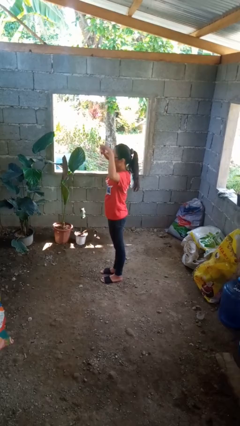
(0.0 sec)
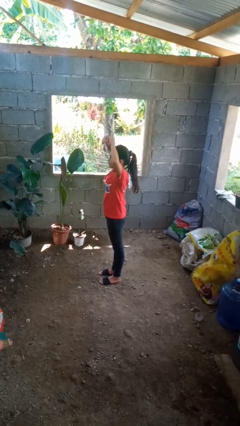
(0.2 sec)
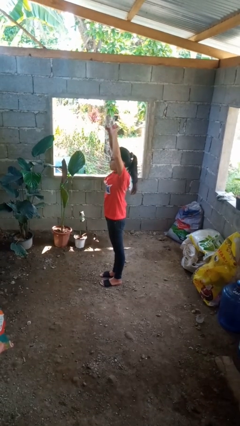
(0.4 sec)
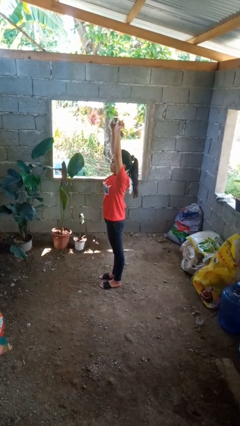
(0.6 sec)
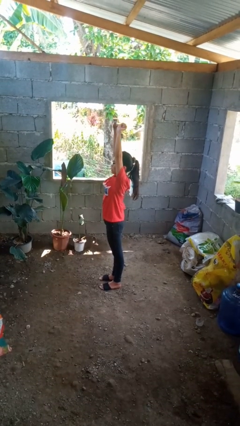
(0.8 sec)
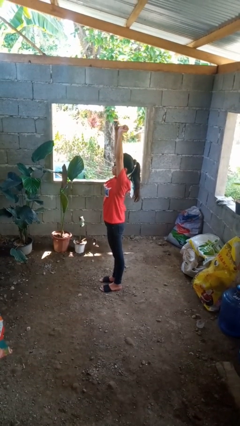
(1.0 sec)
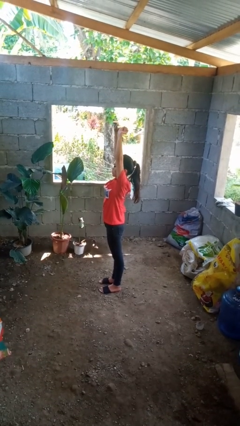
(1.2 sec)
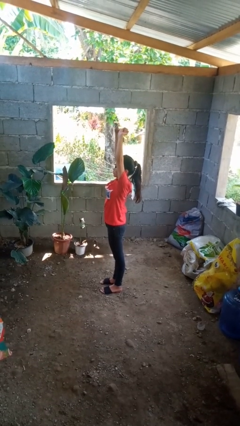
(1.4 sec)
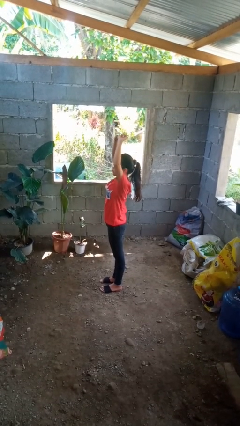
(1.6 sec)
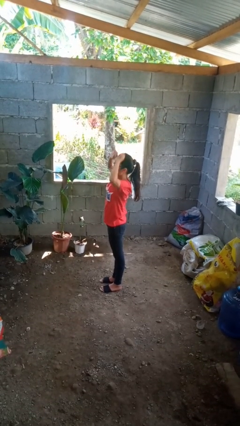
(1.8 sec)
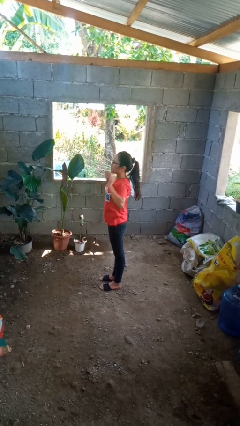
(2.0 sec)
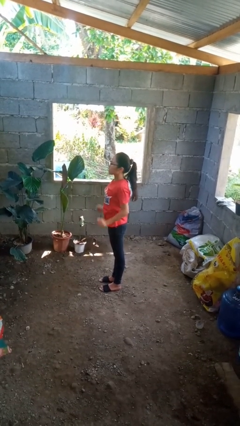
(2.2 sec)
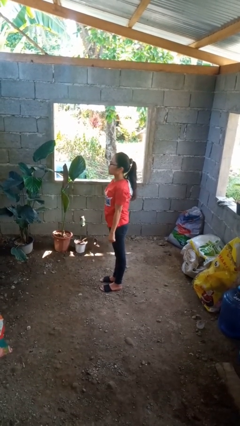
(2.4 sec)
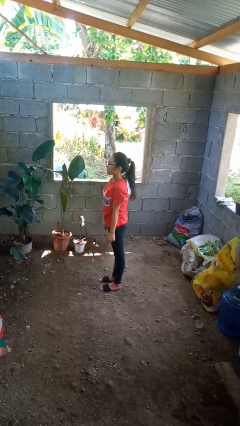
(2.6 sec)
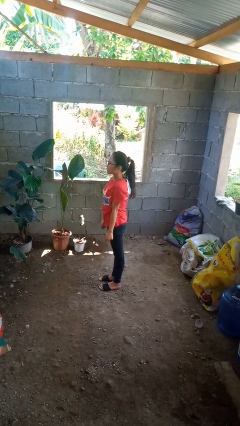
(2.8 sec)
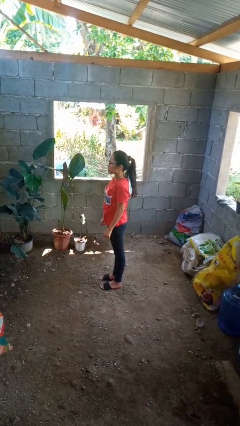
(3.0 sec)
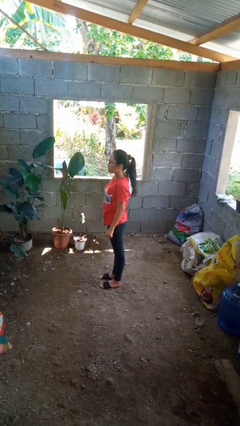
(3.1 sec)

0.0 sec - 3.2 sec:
person stretches arms over head

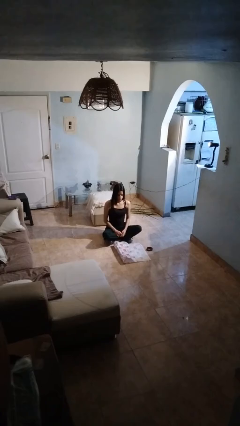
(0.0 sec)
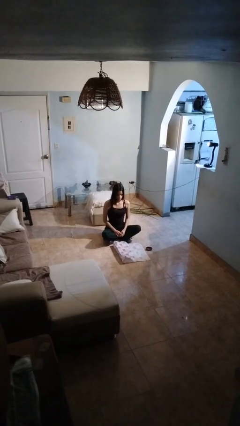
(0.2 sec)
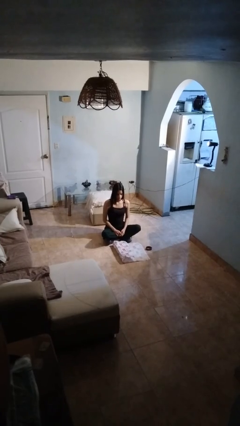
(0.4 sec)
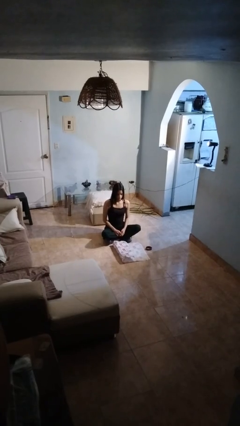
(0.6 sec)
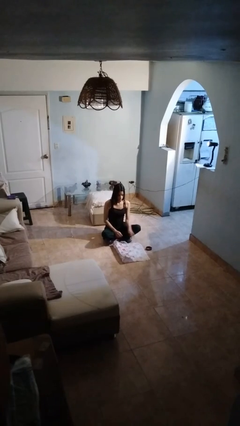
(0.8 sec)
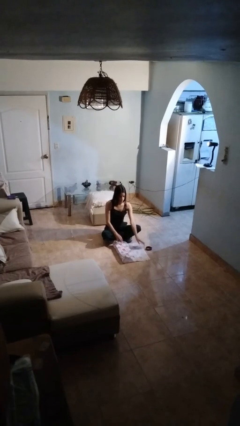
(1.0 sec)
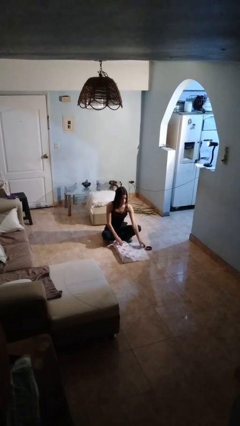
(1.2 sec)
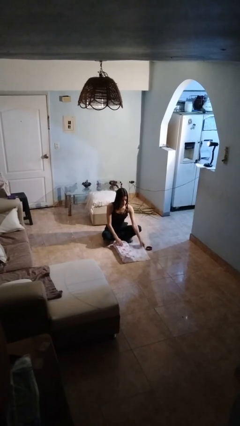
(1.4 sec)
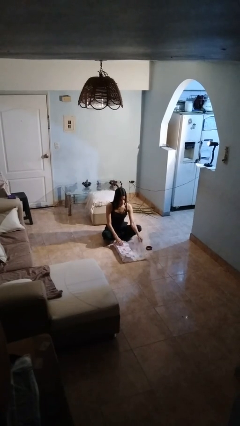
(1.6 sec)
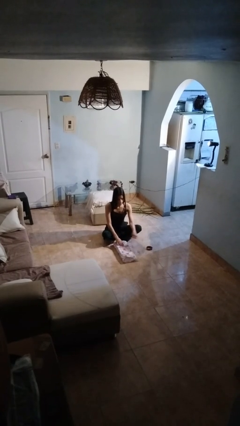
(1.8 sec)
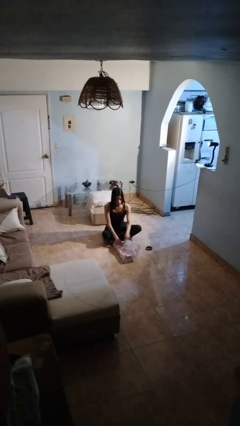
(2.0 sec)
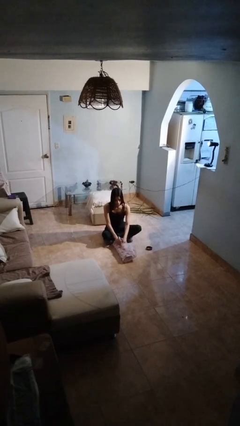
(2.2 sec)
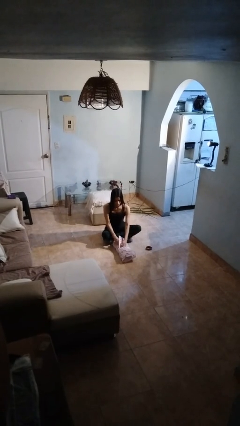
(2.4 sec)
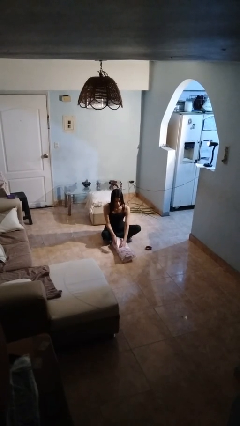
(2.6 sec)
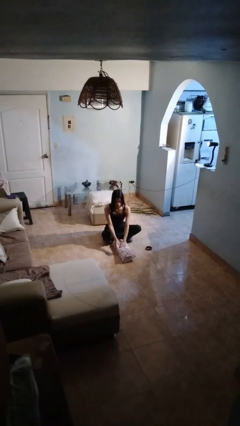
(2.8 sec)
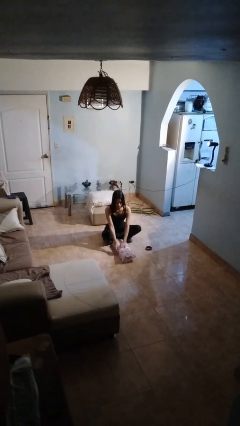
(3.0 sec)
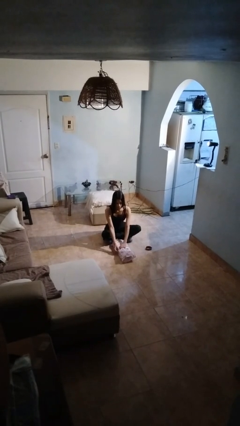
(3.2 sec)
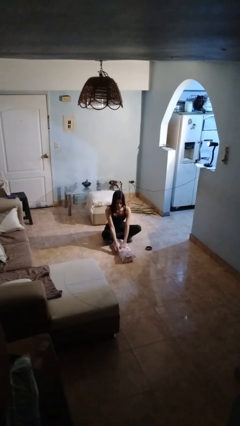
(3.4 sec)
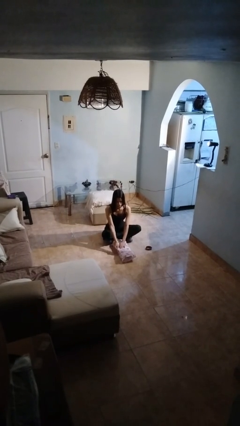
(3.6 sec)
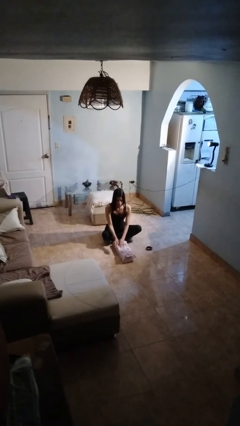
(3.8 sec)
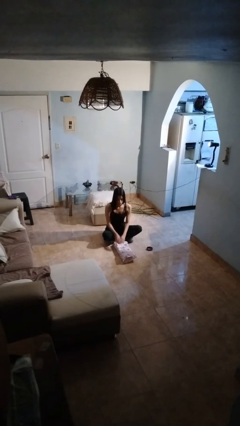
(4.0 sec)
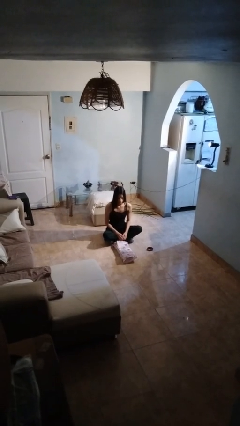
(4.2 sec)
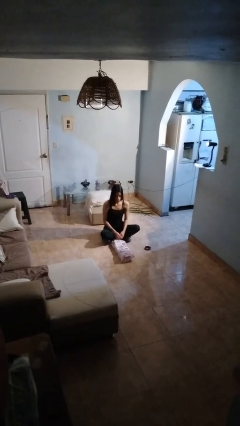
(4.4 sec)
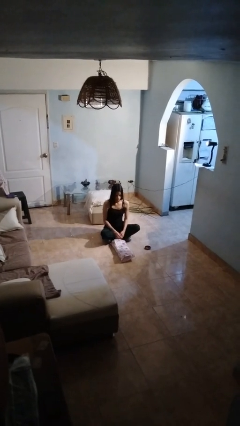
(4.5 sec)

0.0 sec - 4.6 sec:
person wraps box

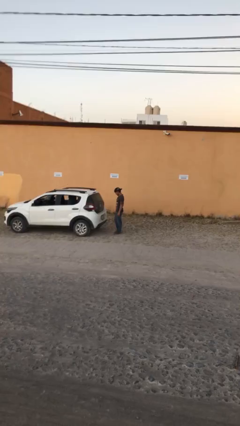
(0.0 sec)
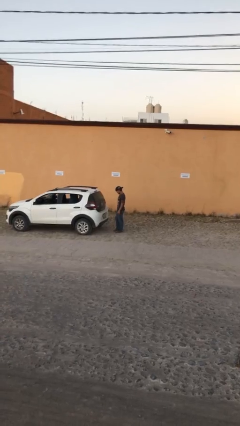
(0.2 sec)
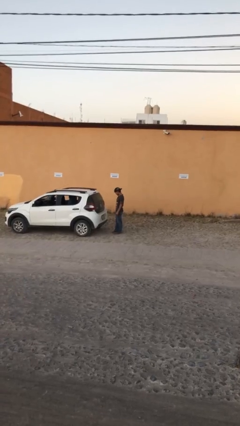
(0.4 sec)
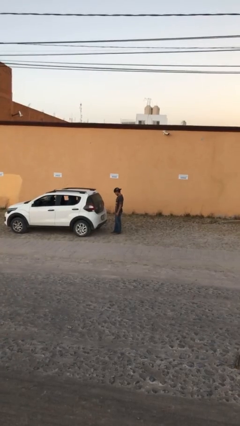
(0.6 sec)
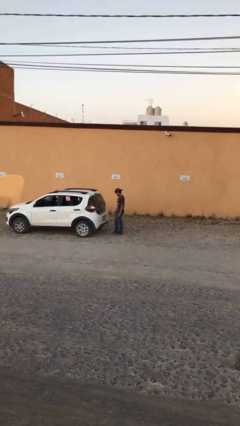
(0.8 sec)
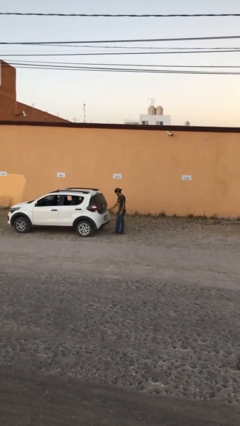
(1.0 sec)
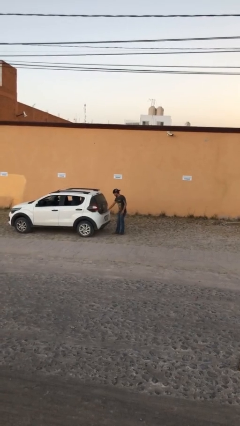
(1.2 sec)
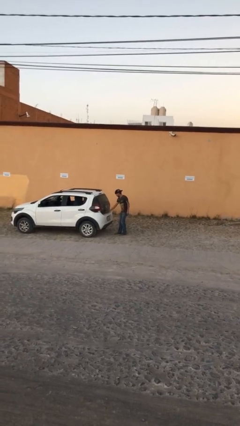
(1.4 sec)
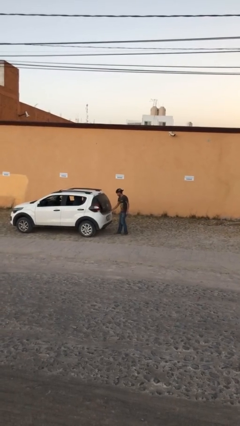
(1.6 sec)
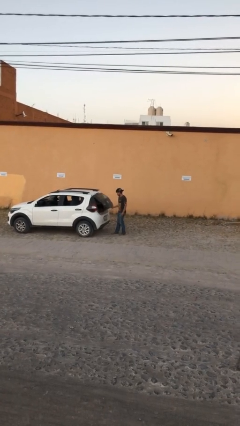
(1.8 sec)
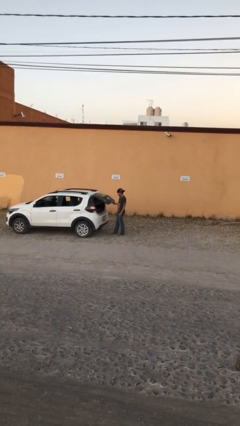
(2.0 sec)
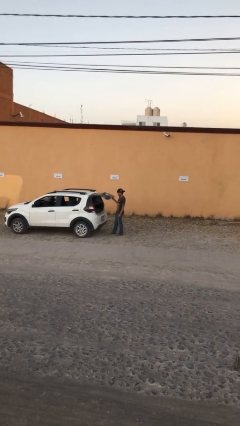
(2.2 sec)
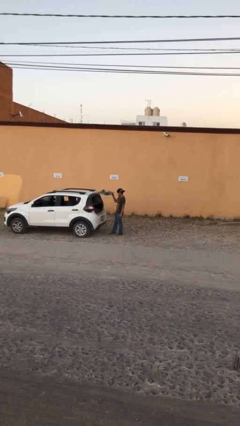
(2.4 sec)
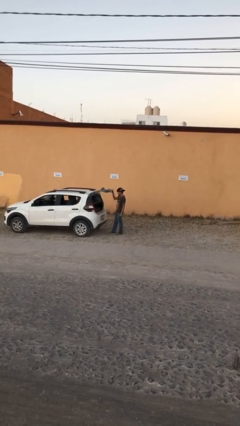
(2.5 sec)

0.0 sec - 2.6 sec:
person opens car trunk

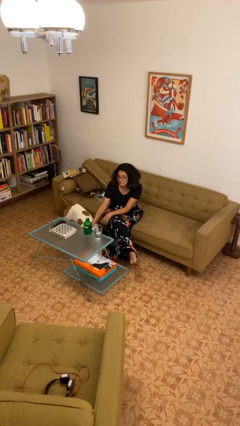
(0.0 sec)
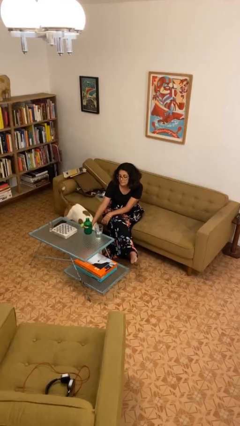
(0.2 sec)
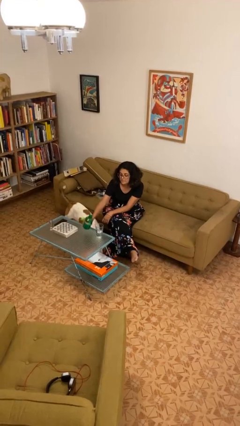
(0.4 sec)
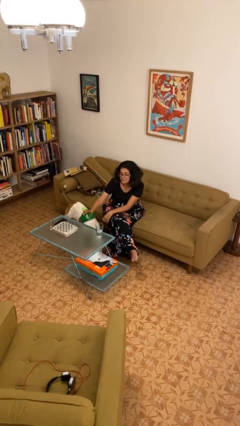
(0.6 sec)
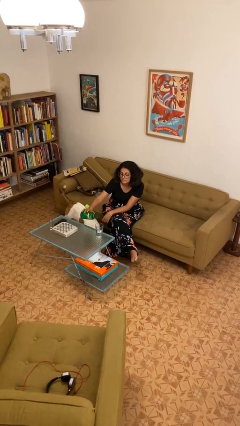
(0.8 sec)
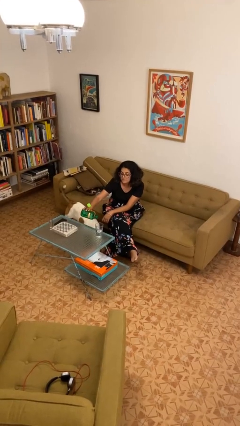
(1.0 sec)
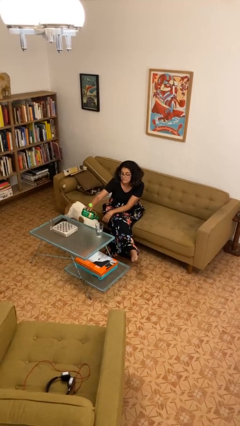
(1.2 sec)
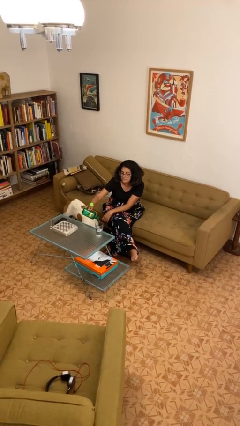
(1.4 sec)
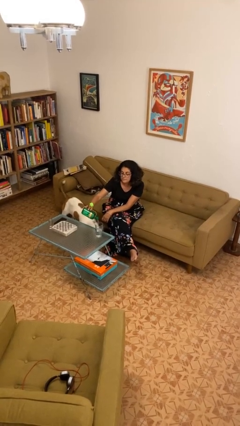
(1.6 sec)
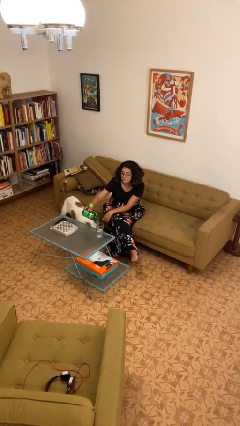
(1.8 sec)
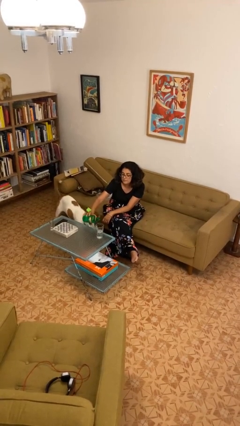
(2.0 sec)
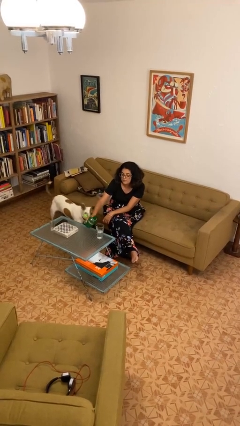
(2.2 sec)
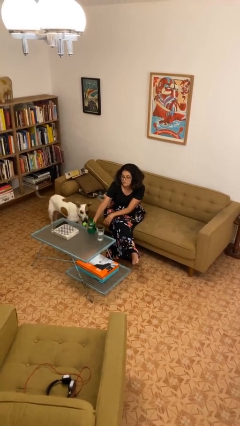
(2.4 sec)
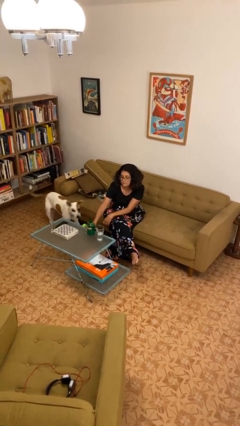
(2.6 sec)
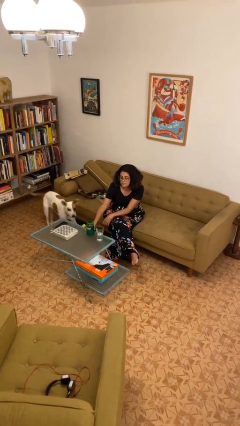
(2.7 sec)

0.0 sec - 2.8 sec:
person pours liquid into cup

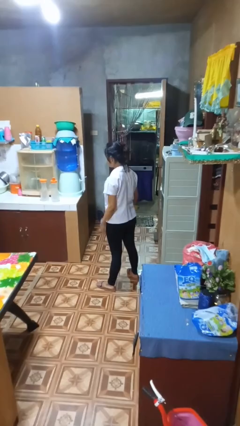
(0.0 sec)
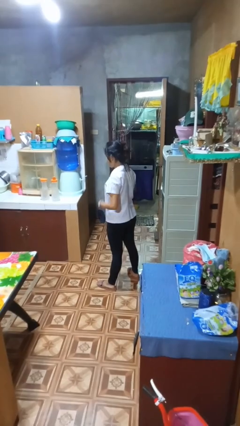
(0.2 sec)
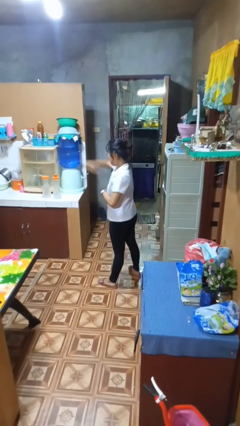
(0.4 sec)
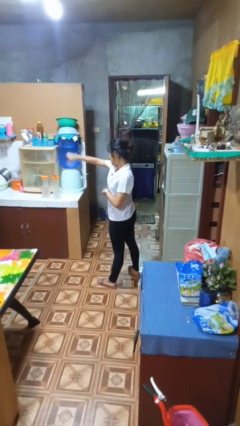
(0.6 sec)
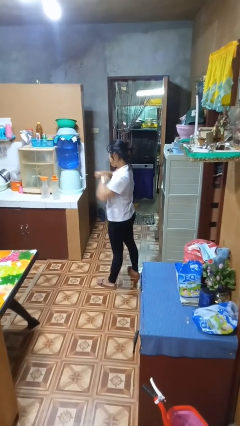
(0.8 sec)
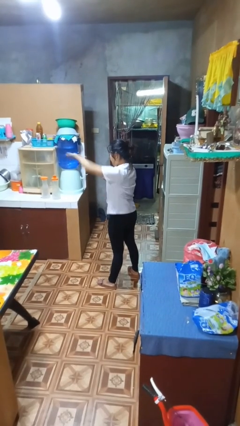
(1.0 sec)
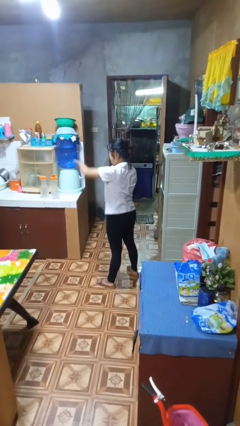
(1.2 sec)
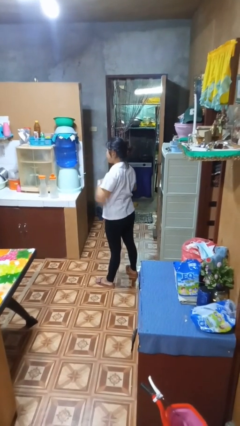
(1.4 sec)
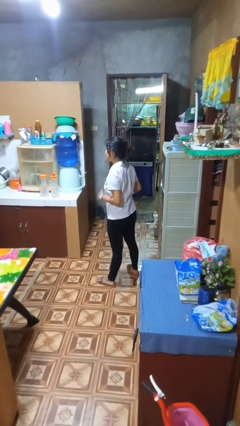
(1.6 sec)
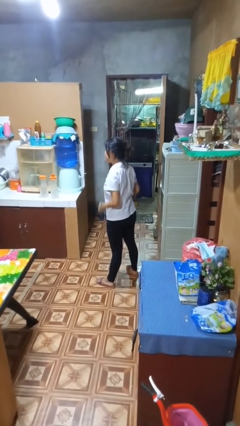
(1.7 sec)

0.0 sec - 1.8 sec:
person punches

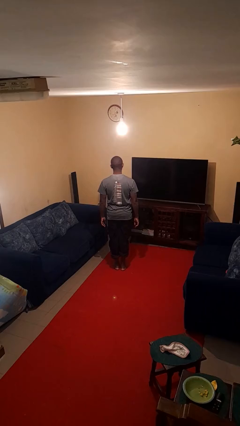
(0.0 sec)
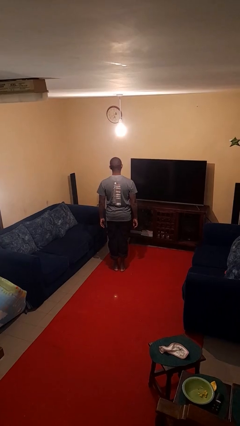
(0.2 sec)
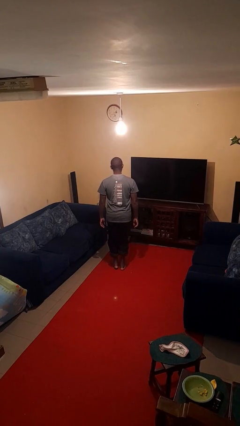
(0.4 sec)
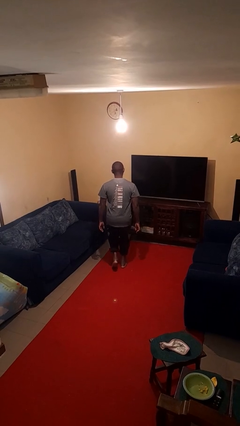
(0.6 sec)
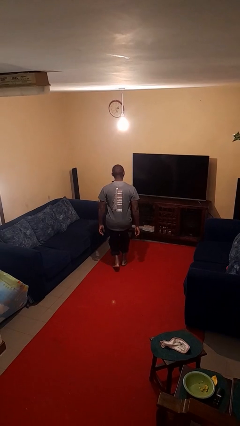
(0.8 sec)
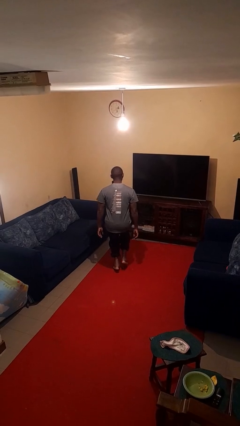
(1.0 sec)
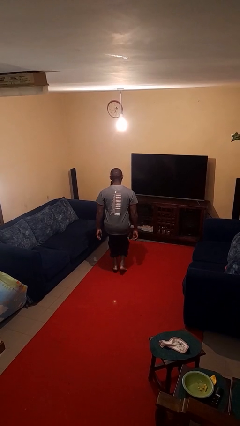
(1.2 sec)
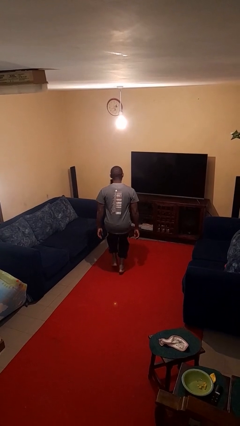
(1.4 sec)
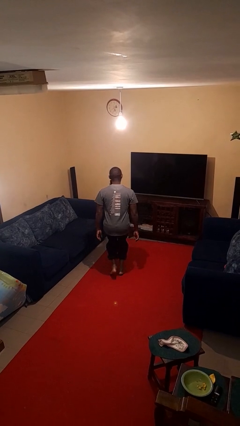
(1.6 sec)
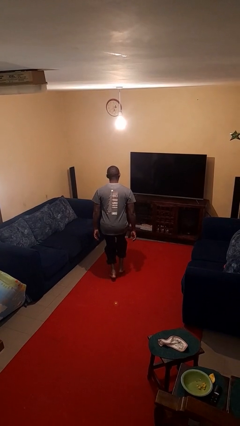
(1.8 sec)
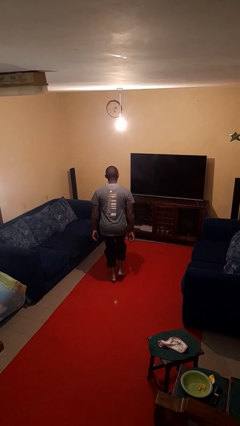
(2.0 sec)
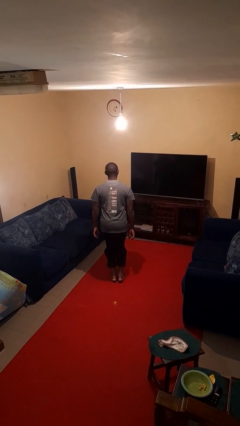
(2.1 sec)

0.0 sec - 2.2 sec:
person walks tiptoe

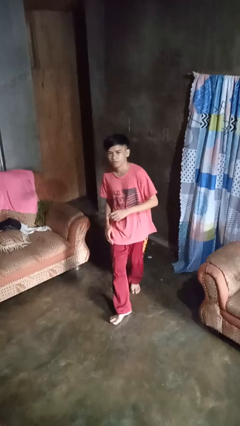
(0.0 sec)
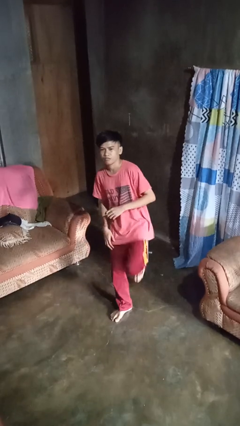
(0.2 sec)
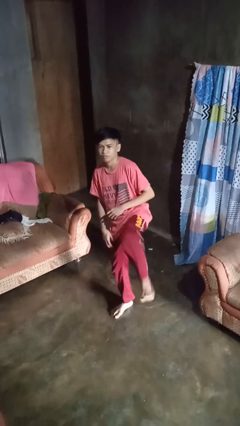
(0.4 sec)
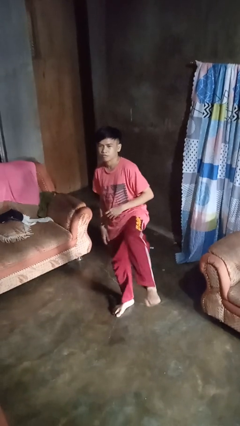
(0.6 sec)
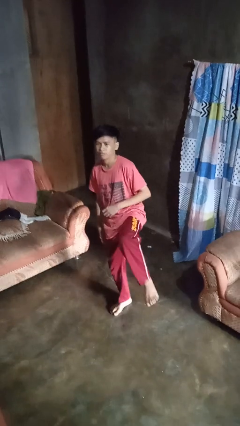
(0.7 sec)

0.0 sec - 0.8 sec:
person karate kicks
